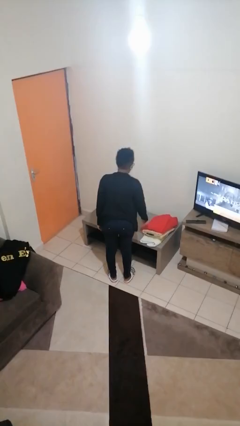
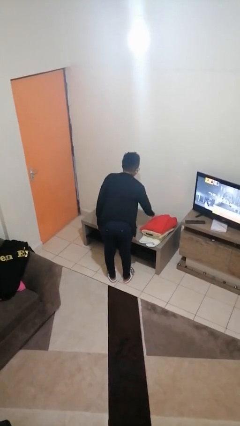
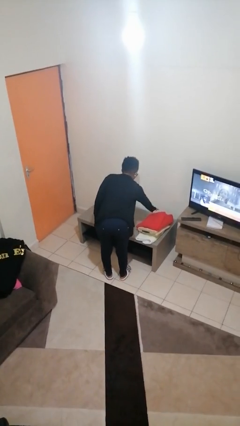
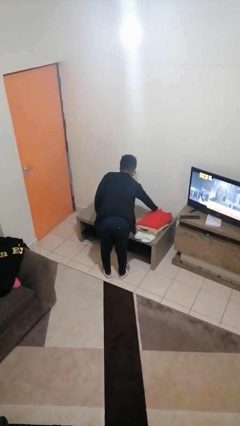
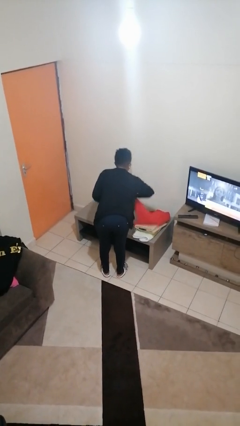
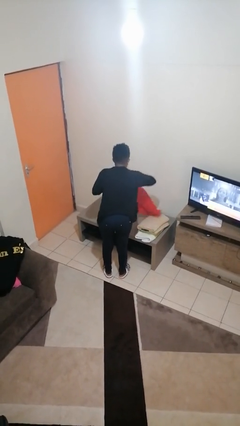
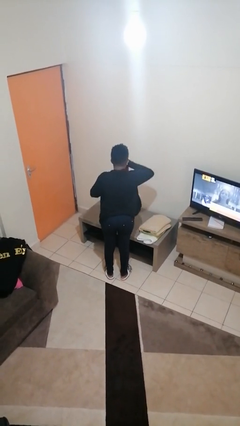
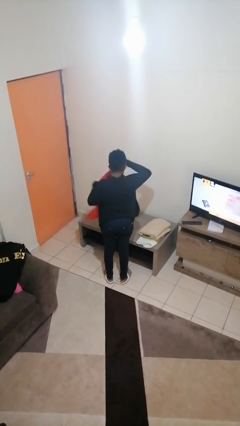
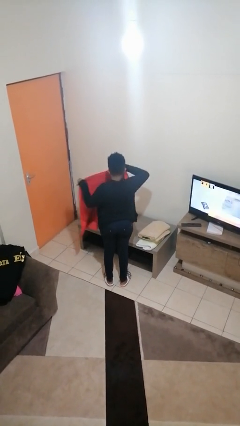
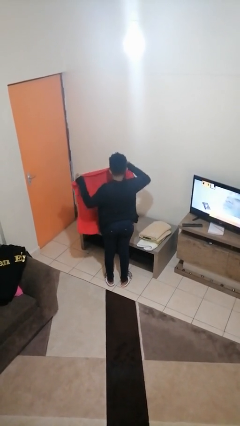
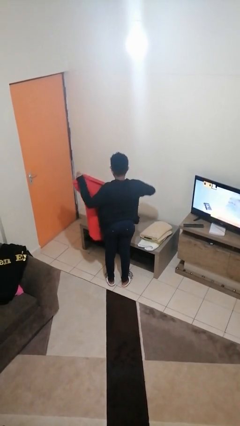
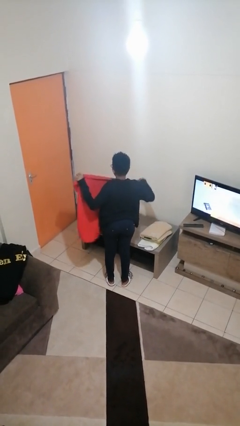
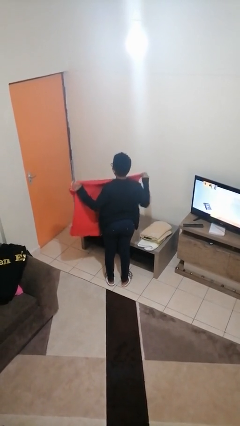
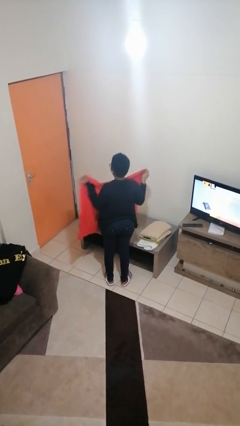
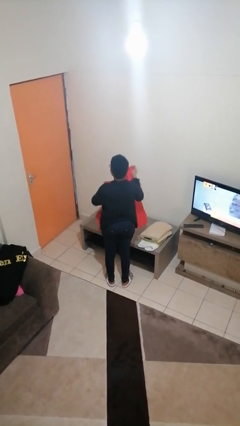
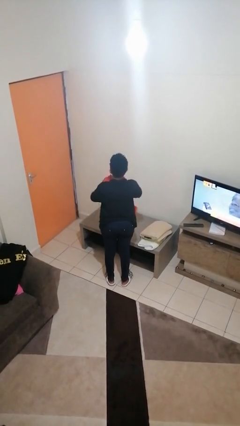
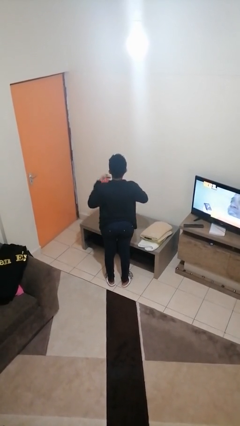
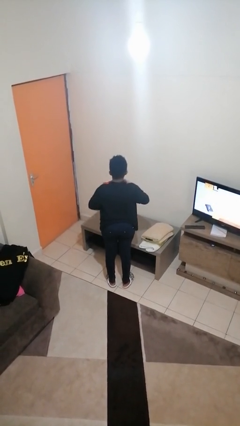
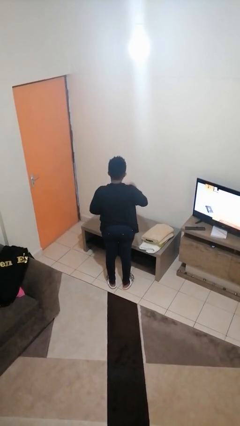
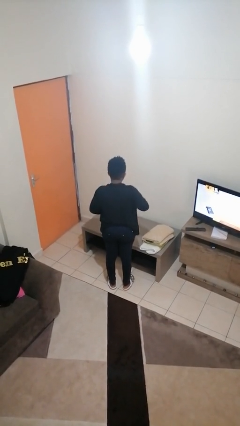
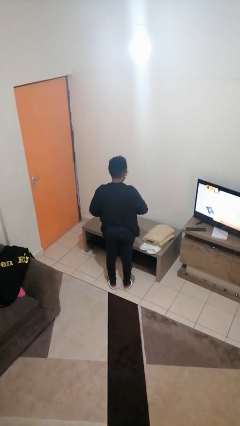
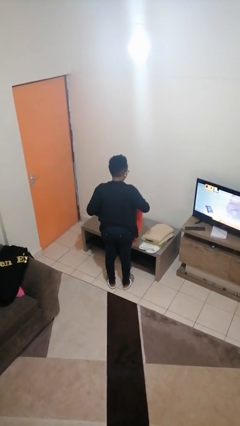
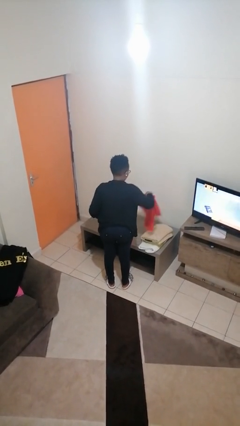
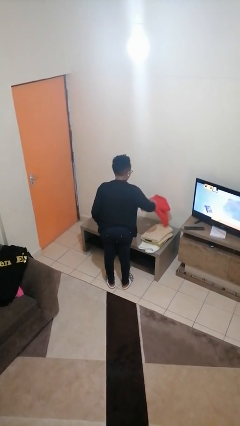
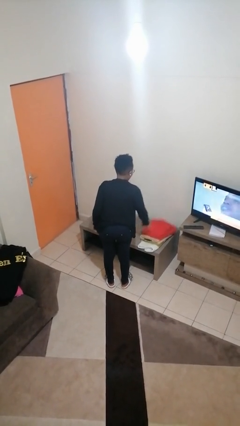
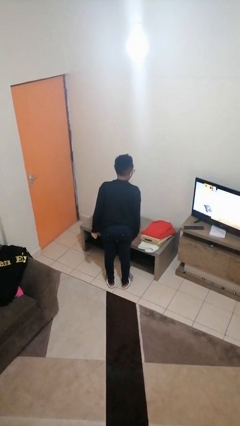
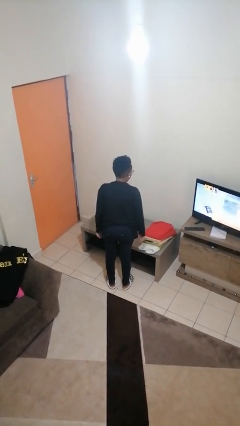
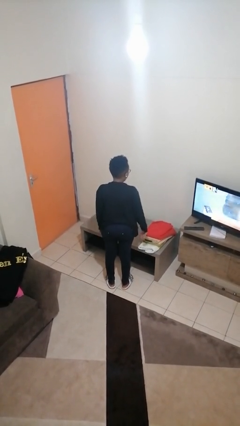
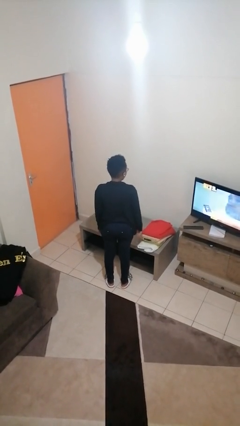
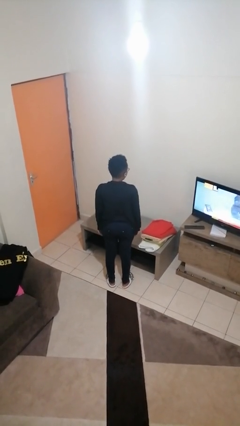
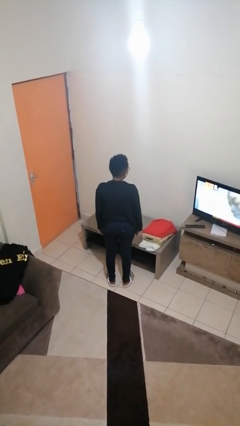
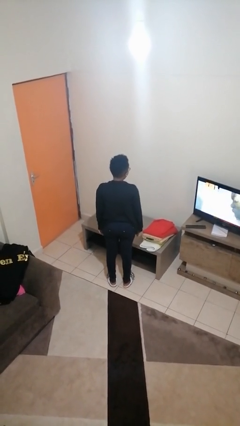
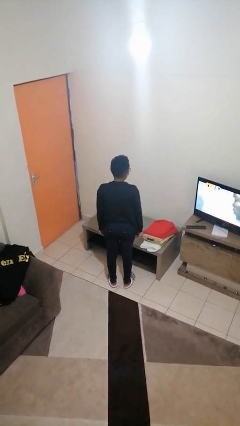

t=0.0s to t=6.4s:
person folds towel

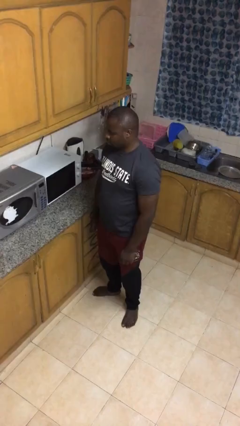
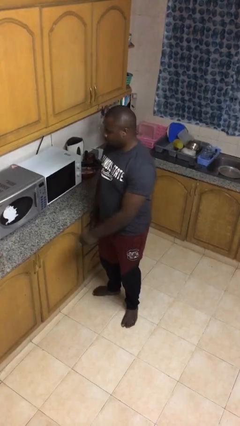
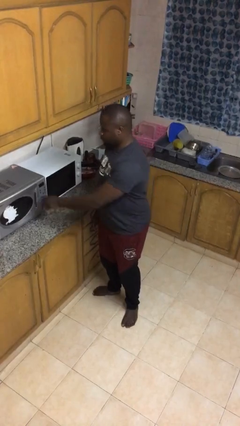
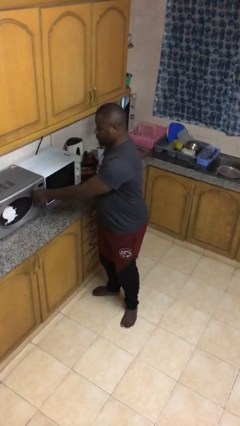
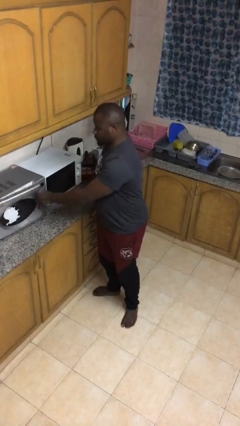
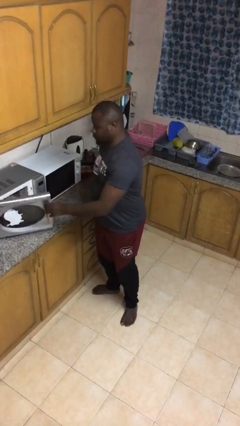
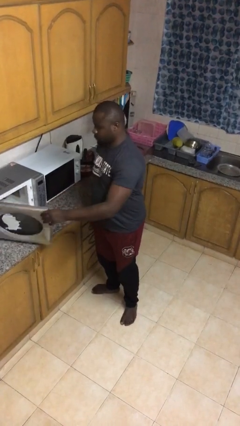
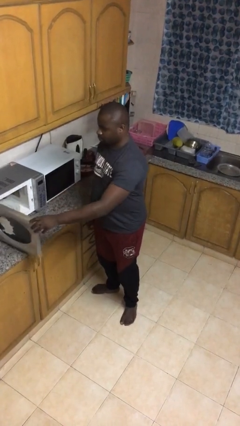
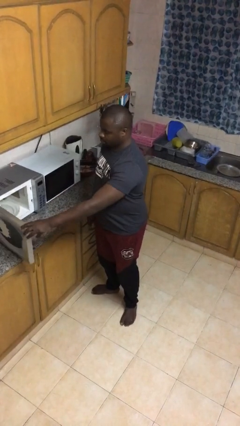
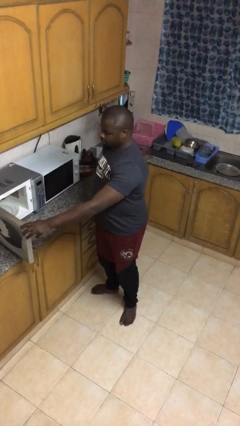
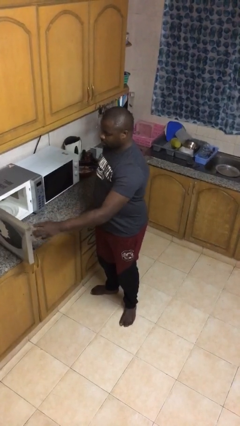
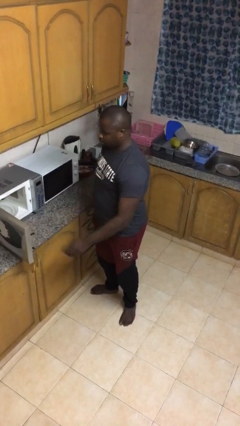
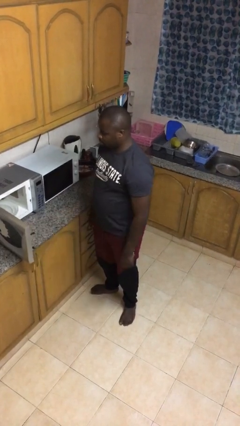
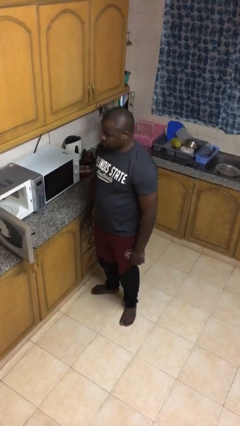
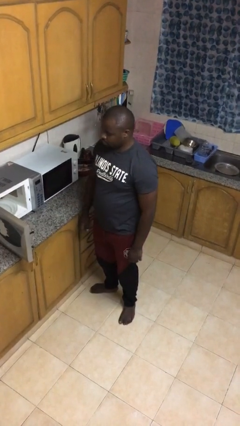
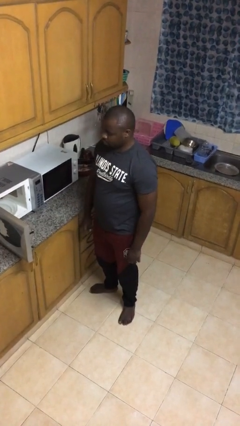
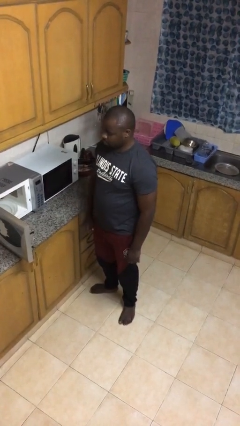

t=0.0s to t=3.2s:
person opens microwave

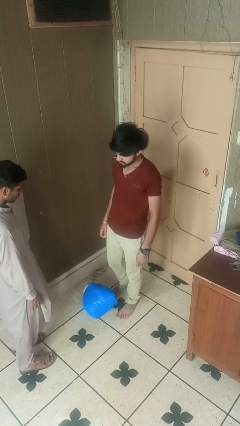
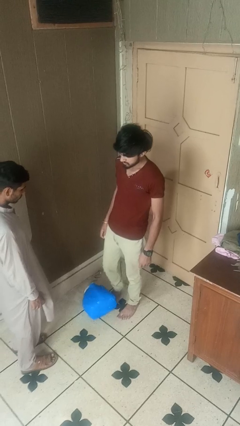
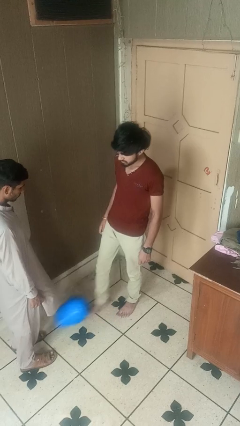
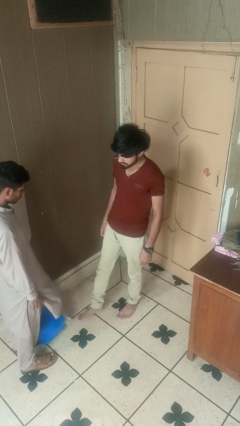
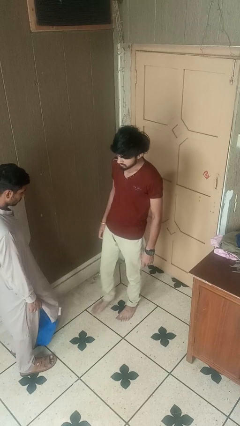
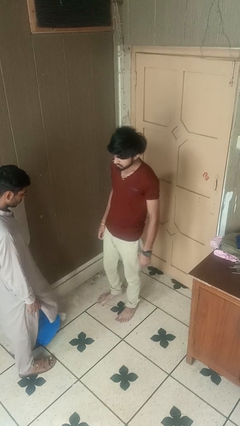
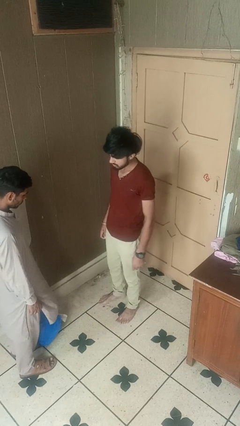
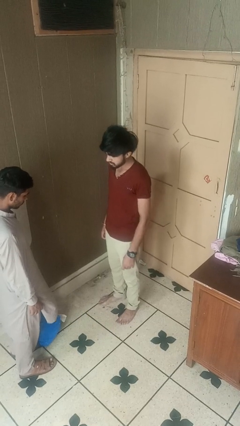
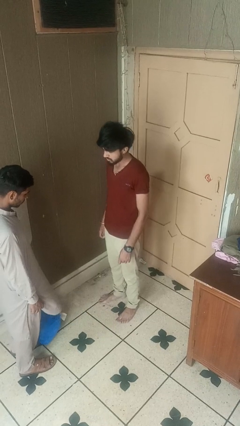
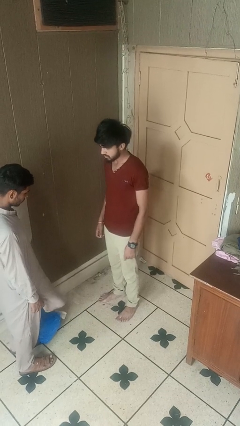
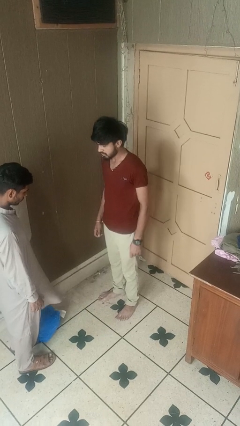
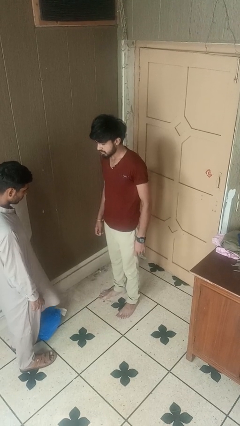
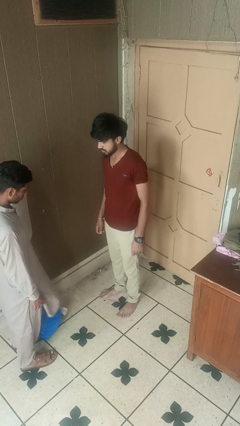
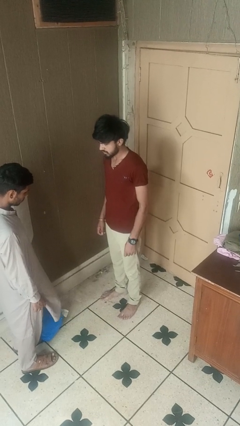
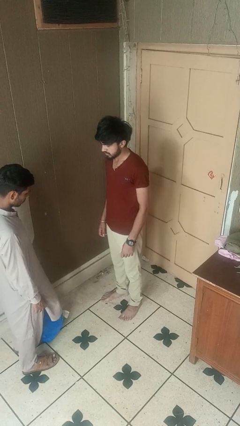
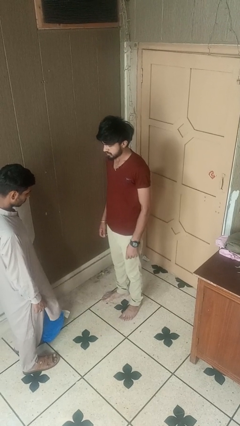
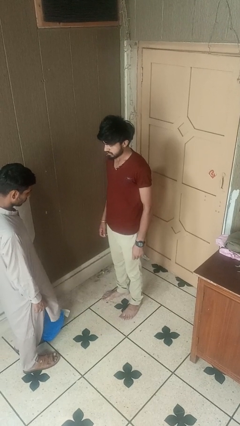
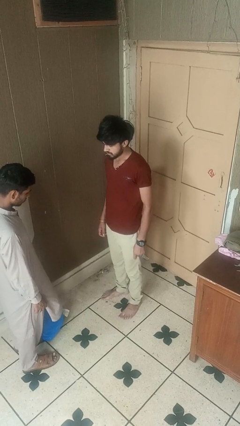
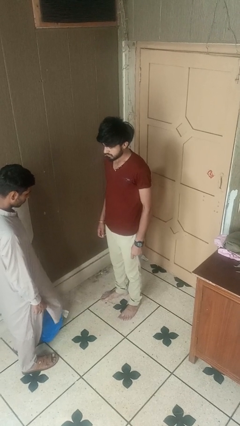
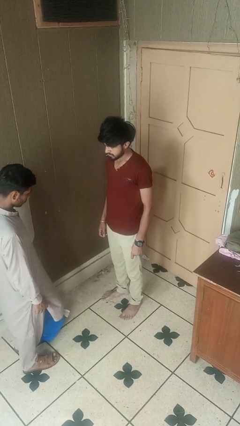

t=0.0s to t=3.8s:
person kicks object to person

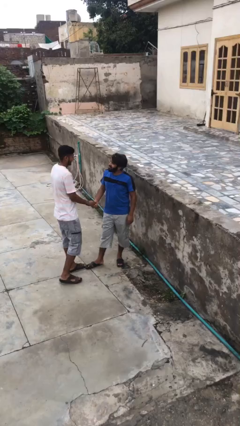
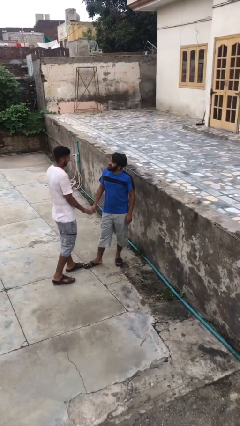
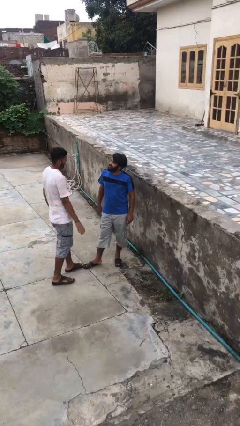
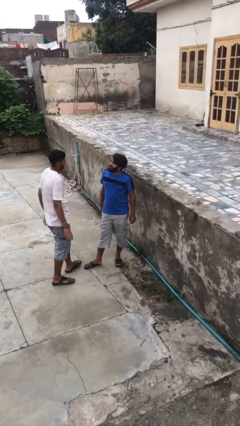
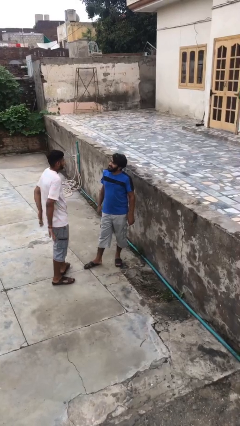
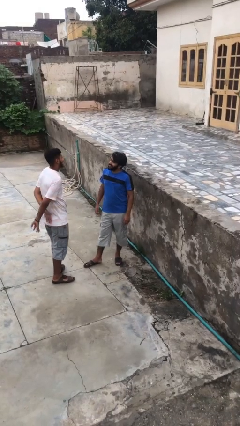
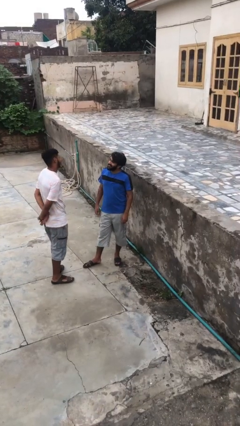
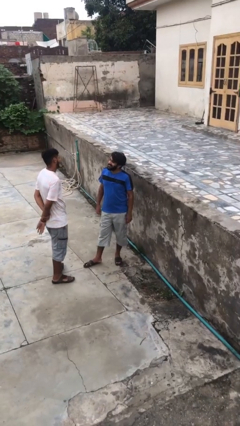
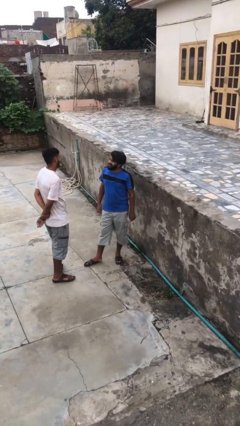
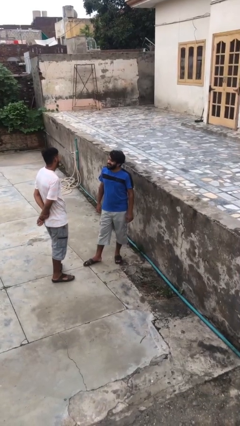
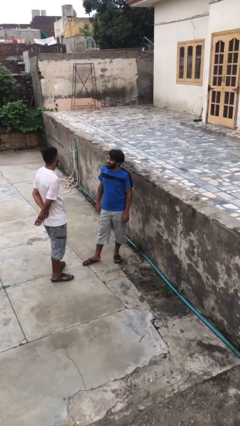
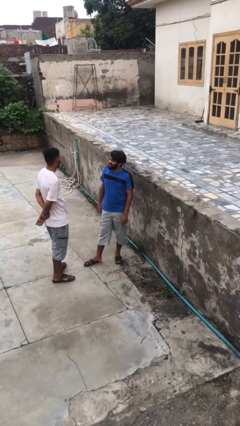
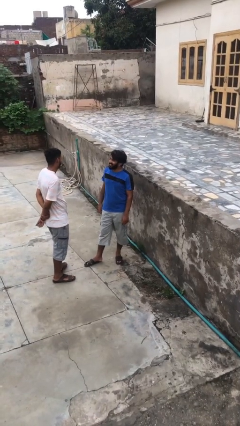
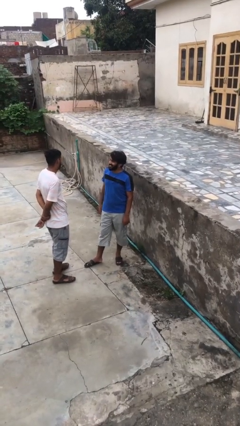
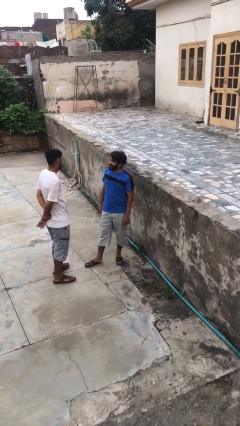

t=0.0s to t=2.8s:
person talks to person

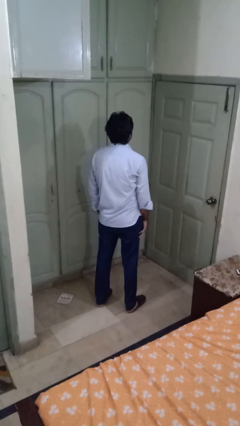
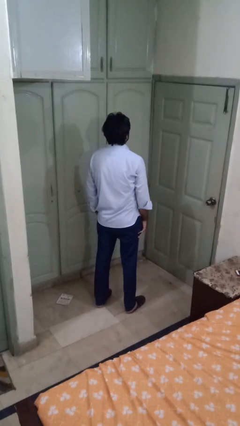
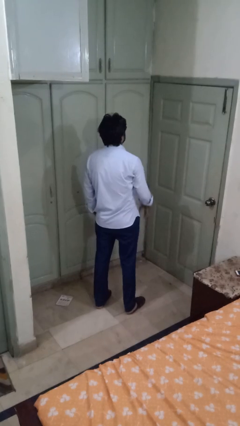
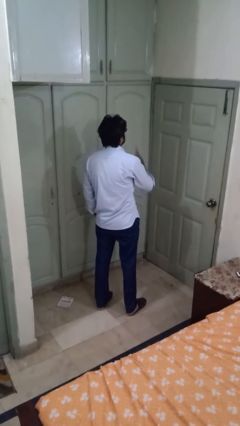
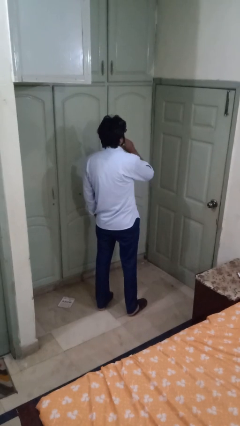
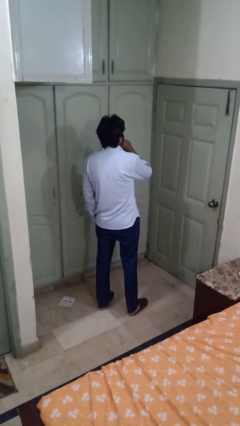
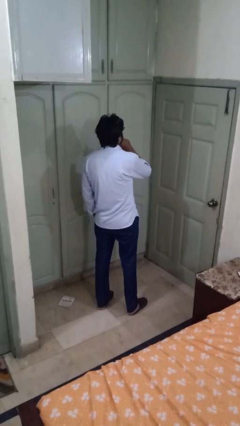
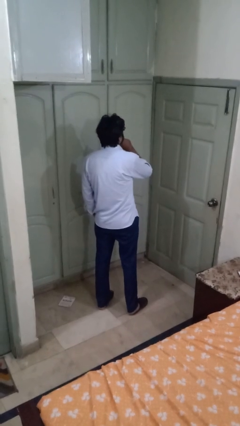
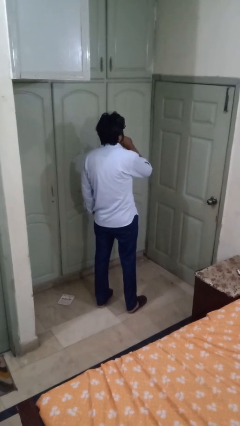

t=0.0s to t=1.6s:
person gestures be quiet
